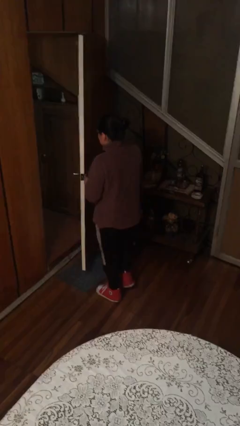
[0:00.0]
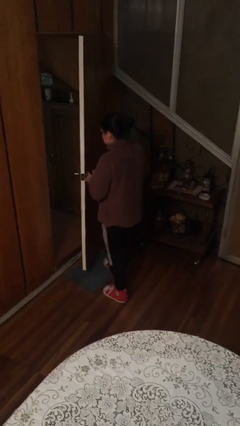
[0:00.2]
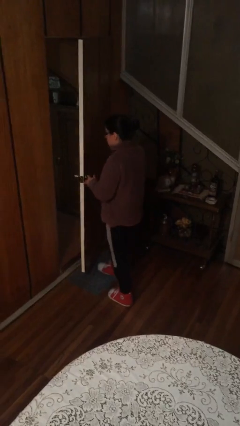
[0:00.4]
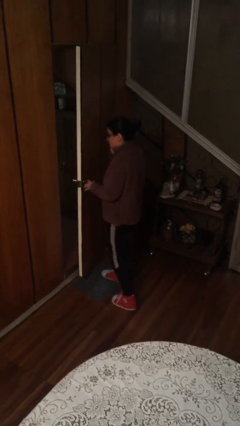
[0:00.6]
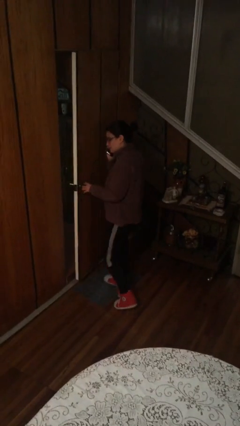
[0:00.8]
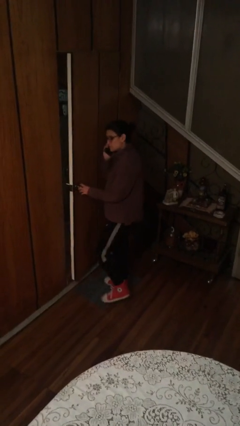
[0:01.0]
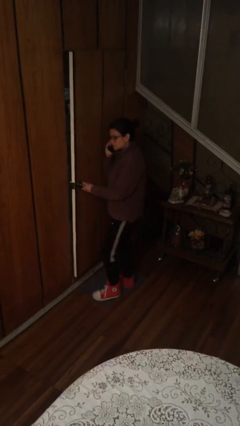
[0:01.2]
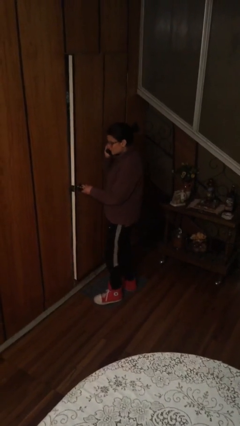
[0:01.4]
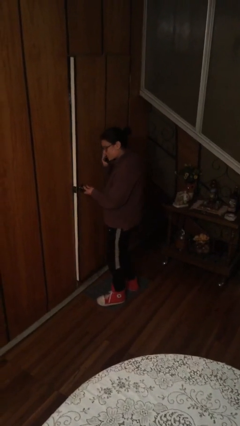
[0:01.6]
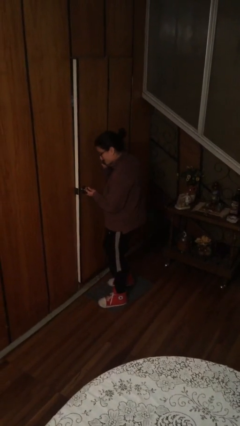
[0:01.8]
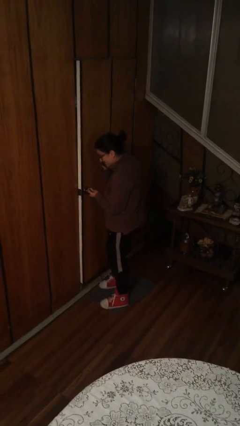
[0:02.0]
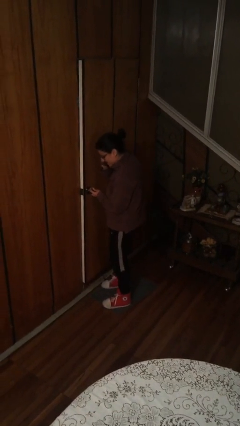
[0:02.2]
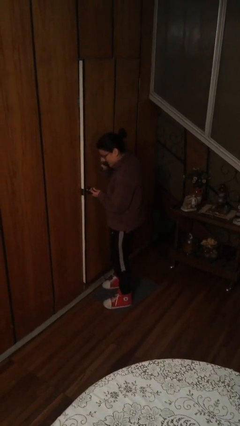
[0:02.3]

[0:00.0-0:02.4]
person closes facility door

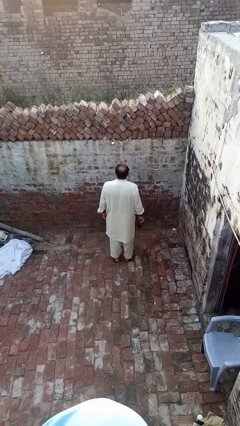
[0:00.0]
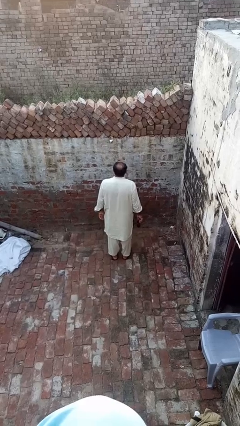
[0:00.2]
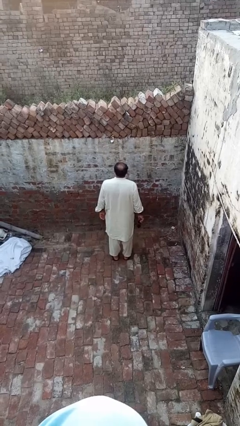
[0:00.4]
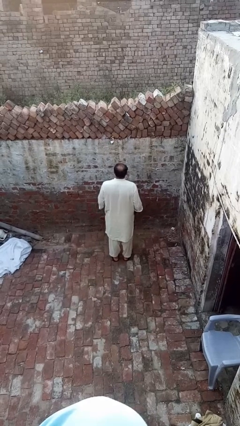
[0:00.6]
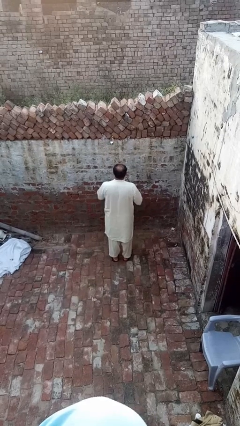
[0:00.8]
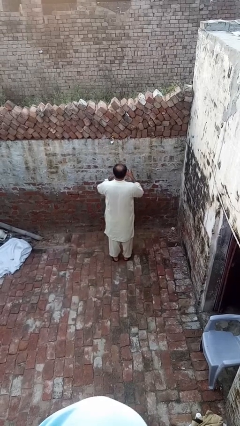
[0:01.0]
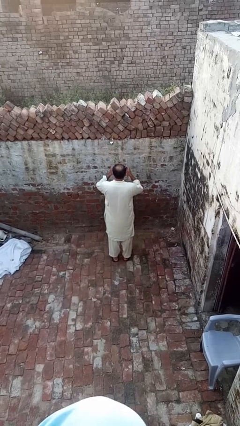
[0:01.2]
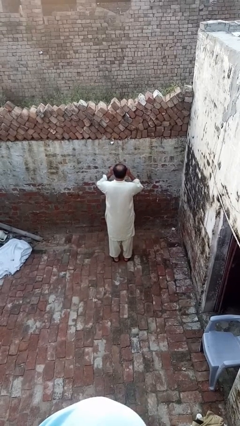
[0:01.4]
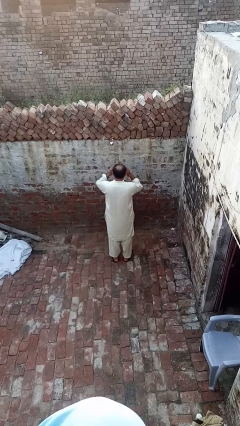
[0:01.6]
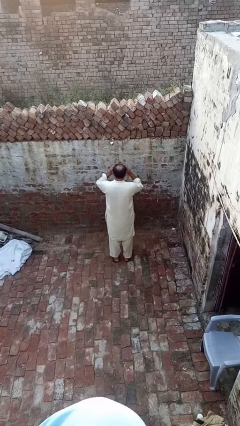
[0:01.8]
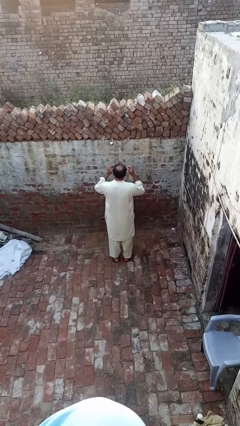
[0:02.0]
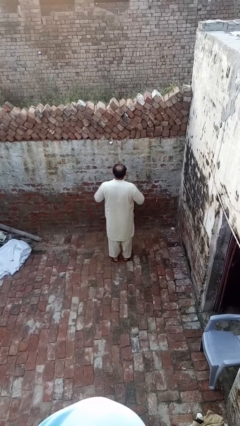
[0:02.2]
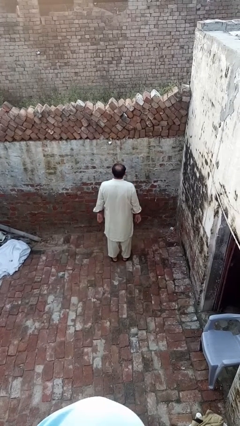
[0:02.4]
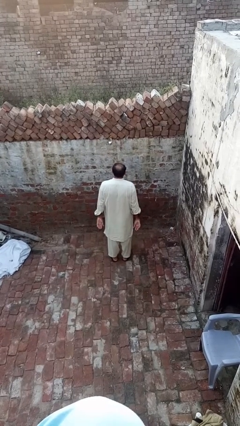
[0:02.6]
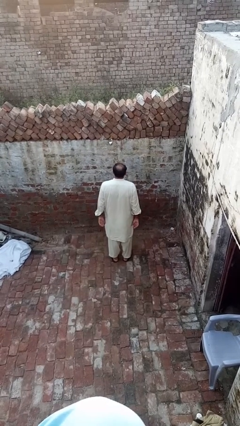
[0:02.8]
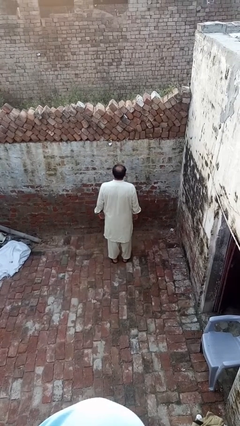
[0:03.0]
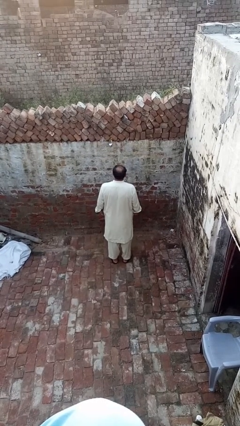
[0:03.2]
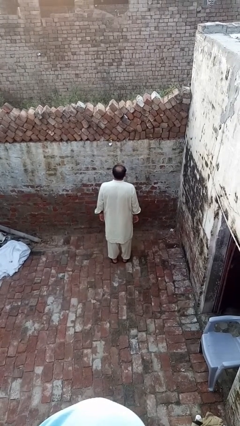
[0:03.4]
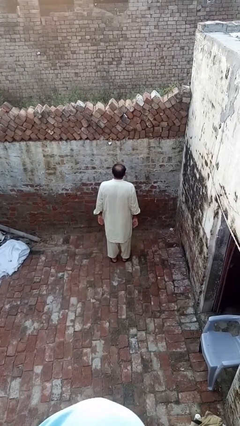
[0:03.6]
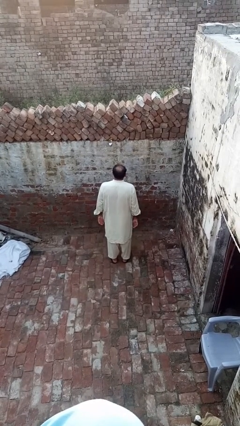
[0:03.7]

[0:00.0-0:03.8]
person puts on sunglasses

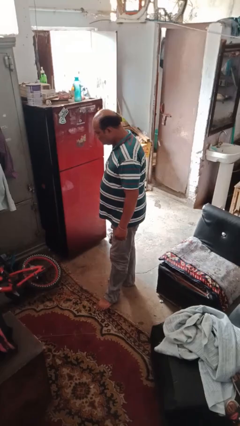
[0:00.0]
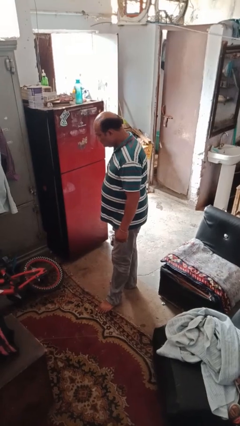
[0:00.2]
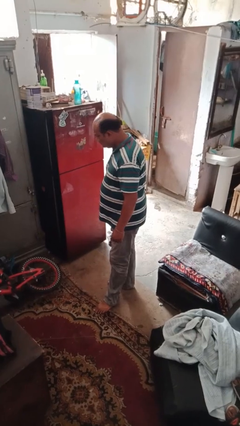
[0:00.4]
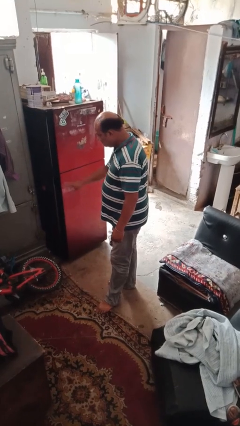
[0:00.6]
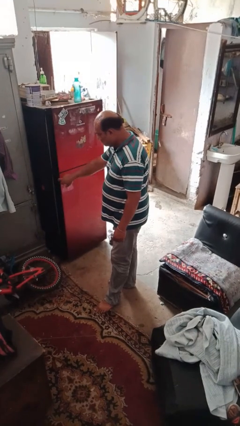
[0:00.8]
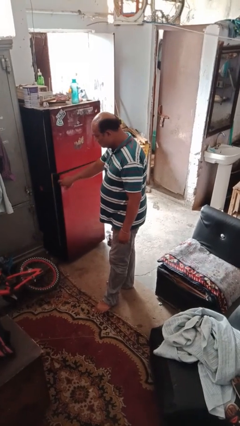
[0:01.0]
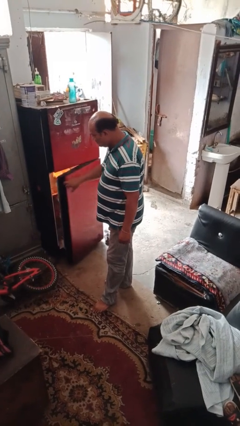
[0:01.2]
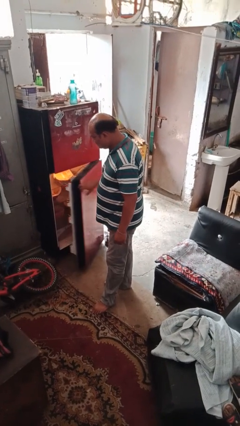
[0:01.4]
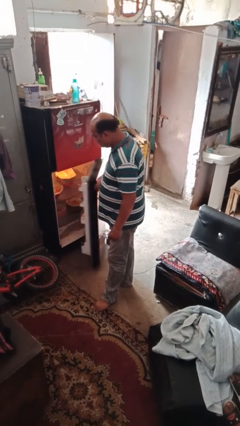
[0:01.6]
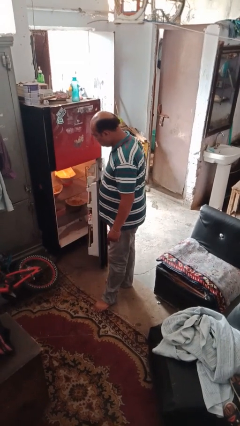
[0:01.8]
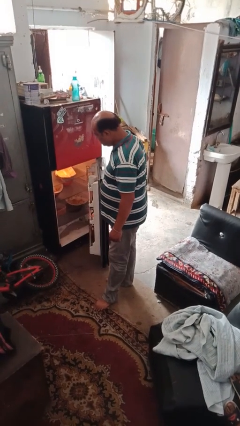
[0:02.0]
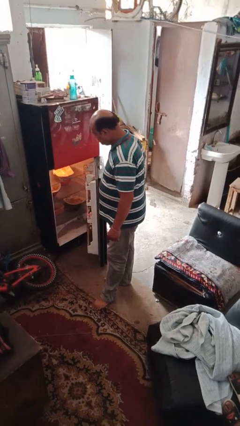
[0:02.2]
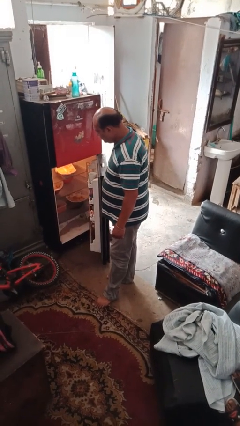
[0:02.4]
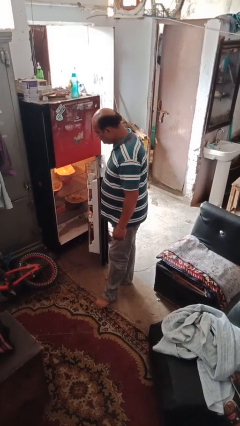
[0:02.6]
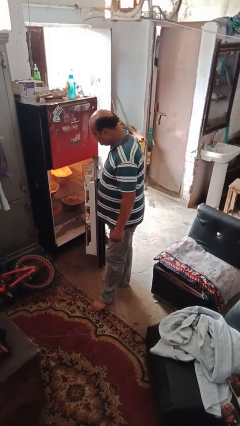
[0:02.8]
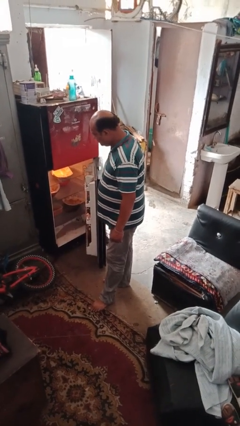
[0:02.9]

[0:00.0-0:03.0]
person opens refrigerator

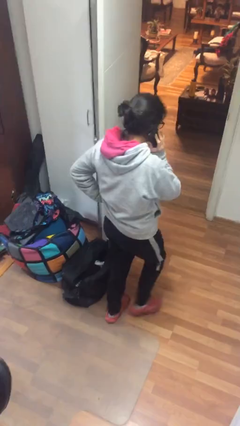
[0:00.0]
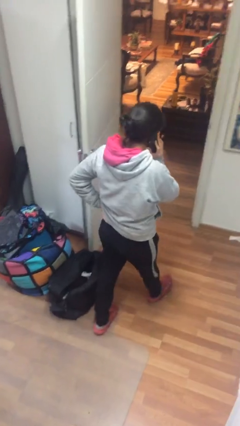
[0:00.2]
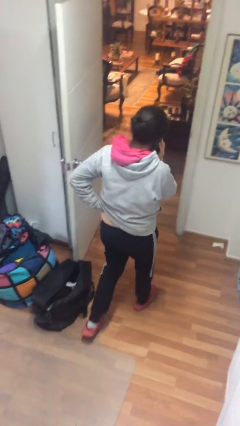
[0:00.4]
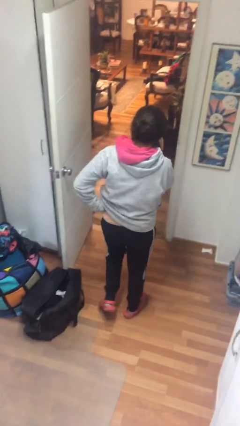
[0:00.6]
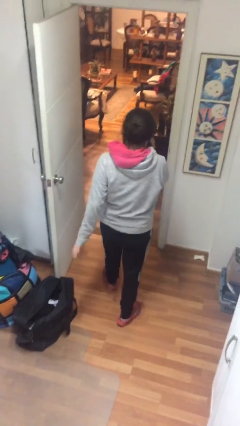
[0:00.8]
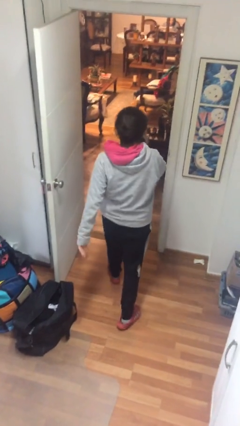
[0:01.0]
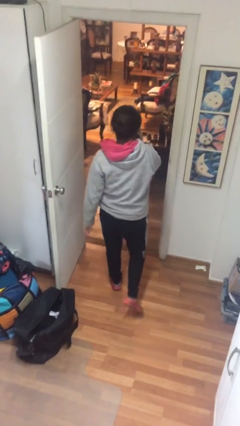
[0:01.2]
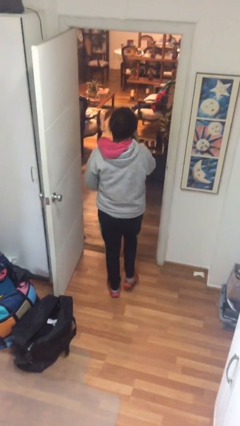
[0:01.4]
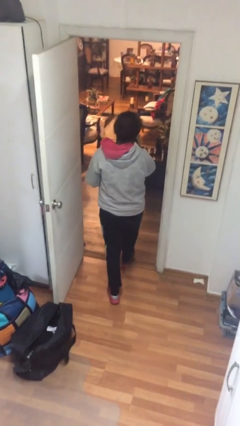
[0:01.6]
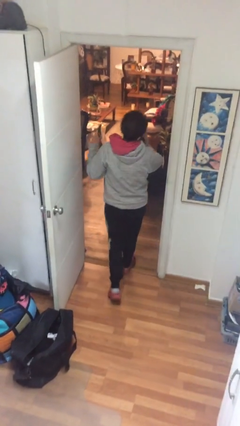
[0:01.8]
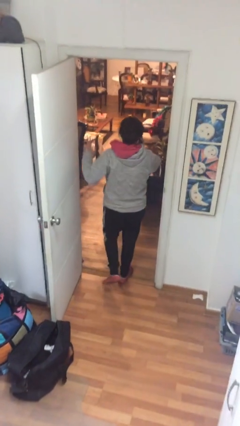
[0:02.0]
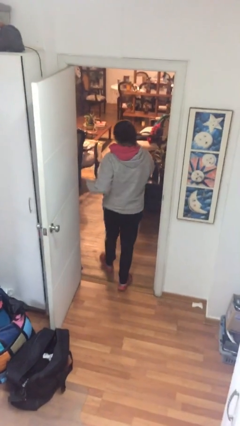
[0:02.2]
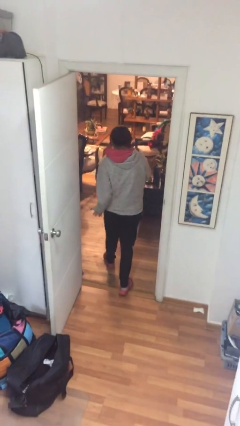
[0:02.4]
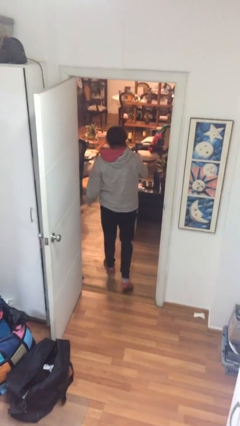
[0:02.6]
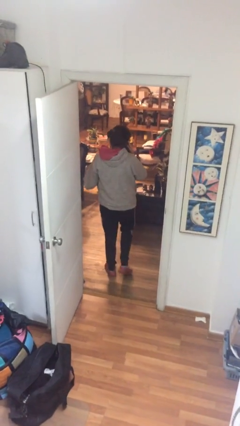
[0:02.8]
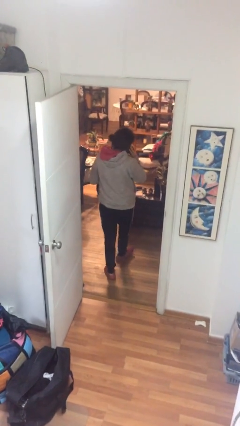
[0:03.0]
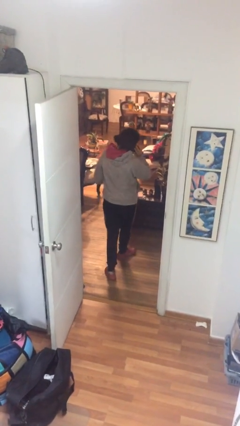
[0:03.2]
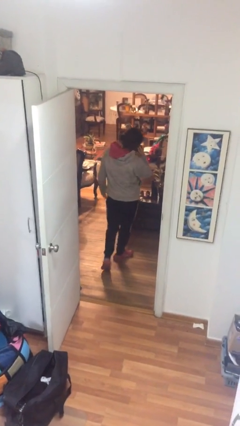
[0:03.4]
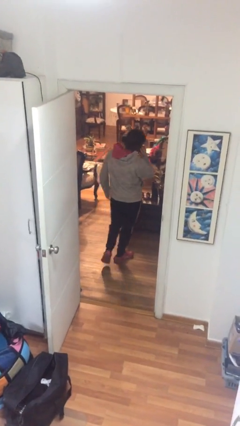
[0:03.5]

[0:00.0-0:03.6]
person exits scene through structure

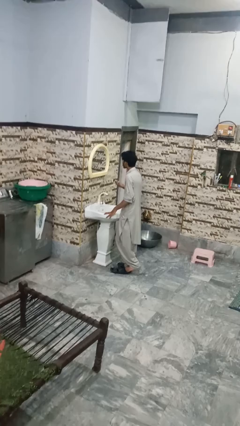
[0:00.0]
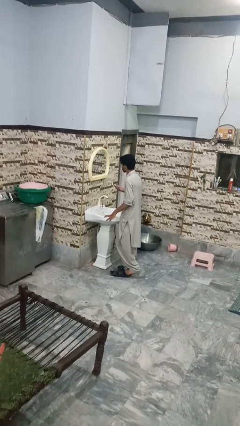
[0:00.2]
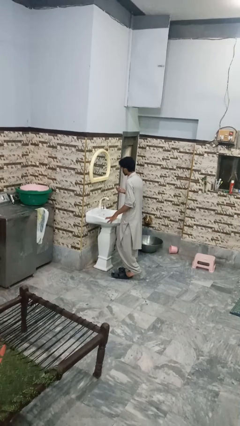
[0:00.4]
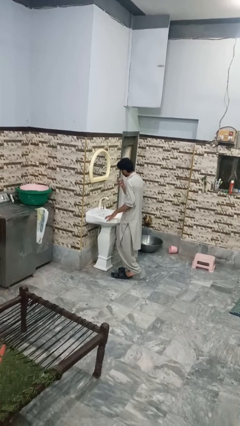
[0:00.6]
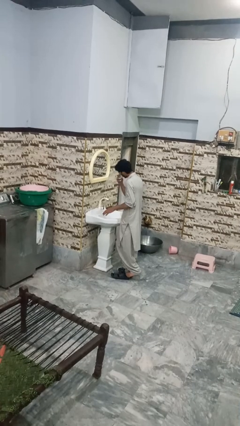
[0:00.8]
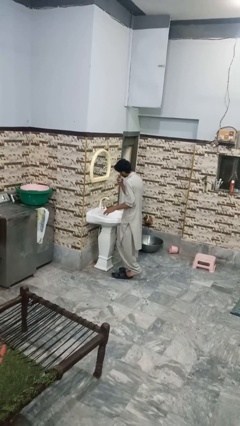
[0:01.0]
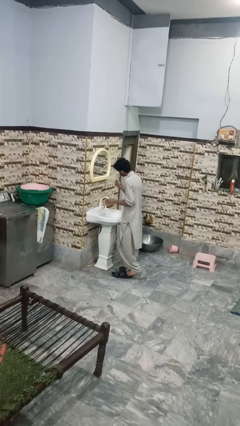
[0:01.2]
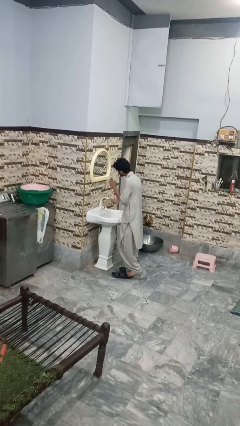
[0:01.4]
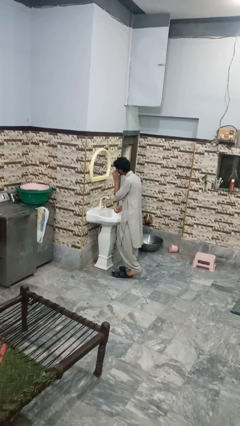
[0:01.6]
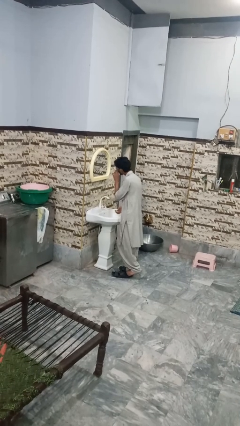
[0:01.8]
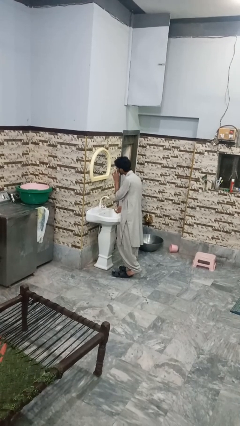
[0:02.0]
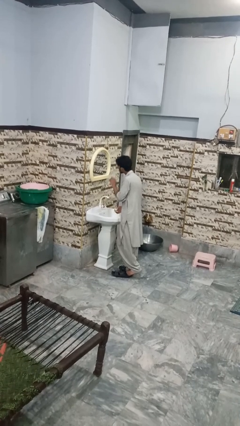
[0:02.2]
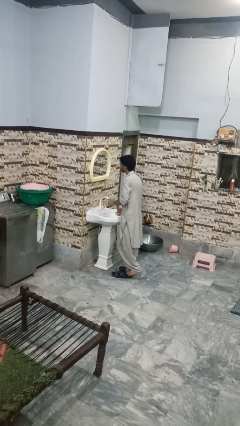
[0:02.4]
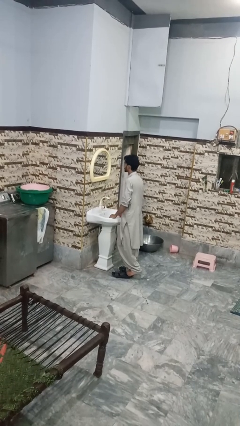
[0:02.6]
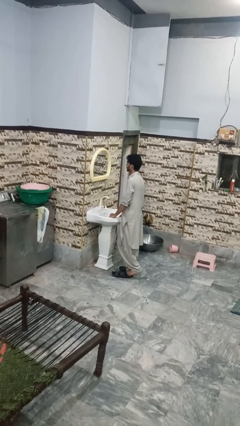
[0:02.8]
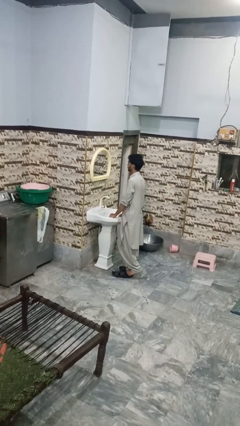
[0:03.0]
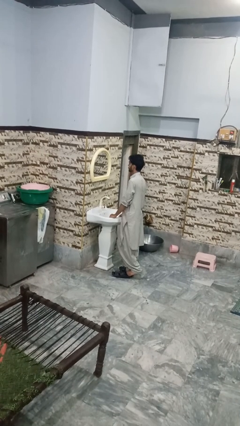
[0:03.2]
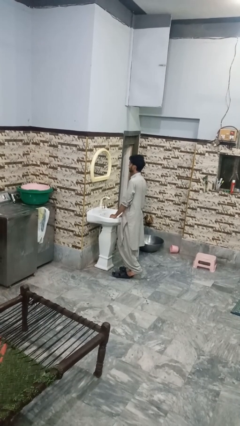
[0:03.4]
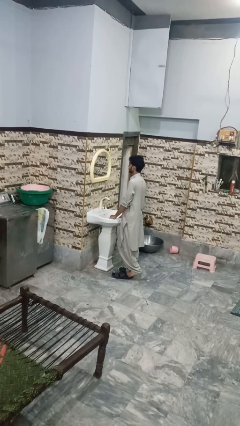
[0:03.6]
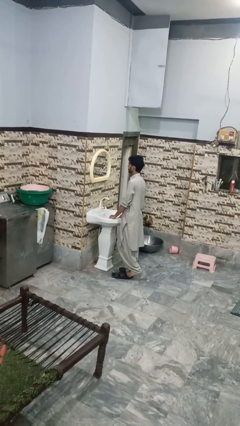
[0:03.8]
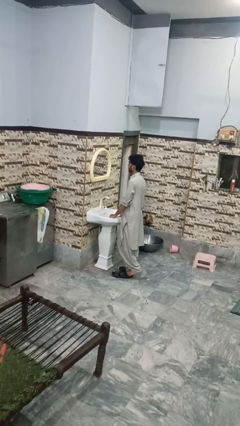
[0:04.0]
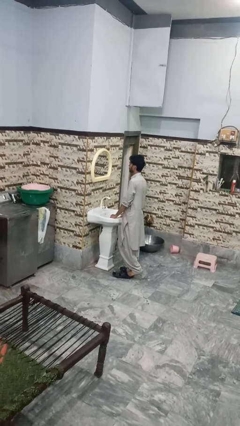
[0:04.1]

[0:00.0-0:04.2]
person shaves face

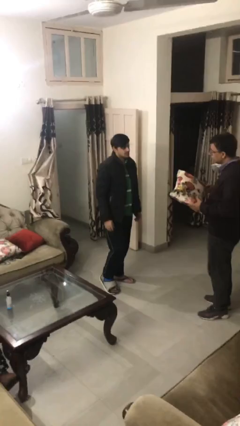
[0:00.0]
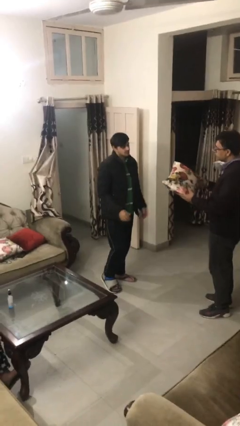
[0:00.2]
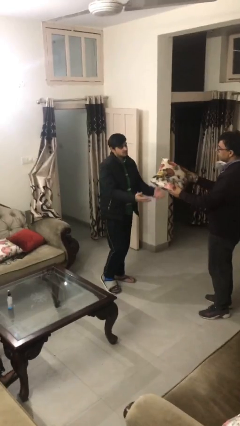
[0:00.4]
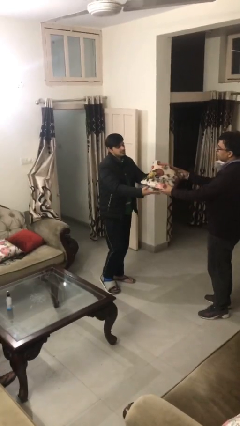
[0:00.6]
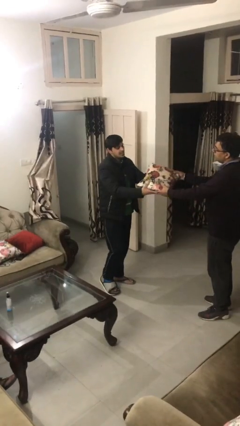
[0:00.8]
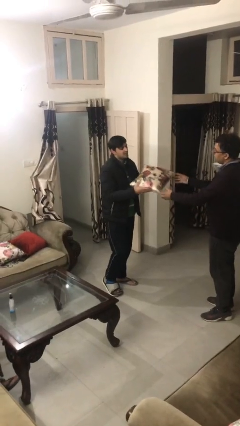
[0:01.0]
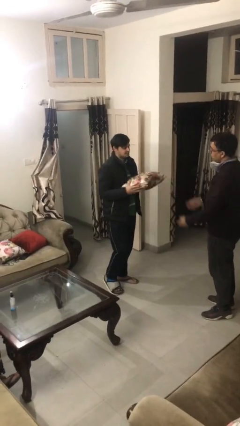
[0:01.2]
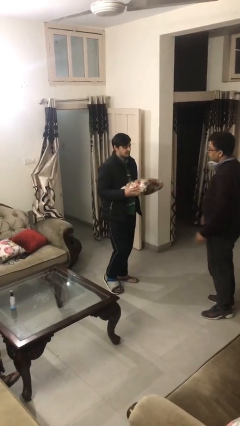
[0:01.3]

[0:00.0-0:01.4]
person transfers object to person
